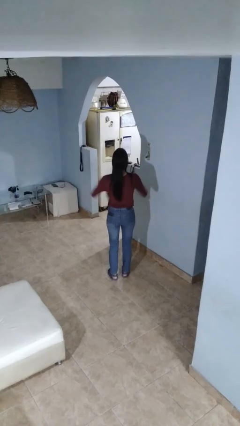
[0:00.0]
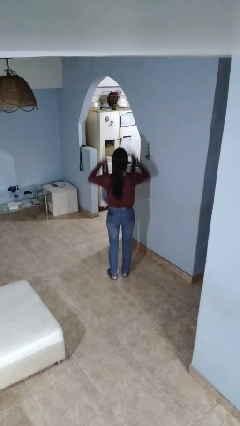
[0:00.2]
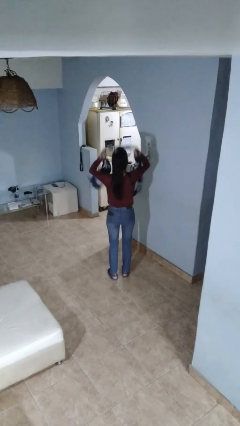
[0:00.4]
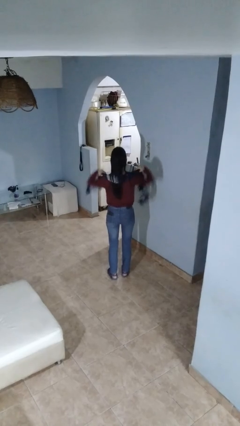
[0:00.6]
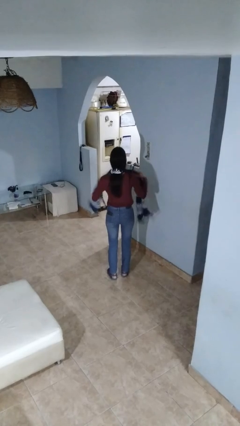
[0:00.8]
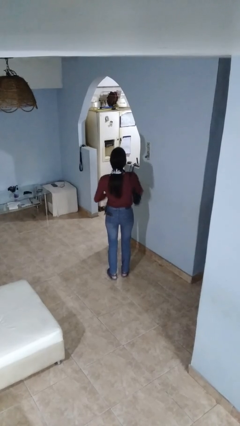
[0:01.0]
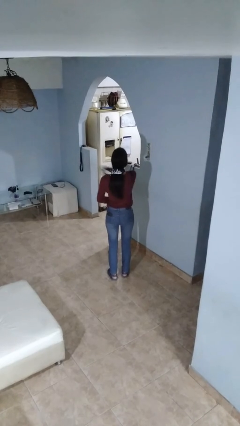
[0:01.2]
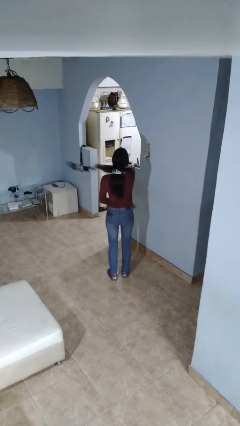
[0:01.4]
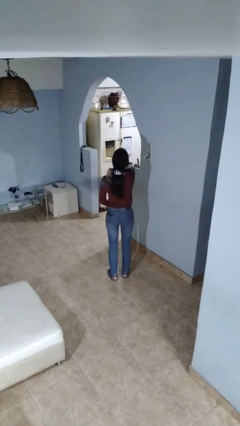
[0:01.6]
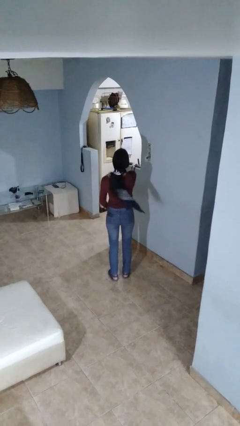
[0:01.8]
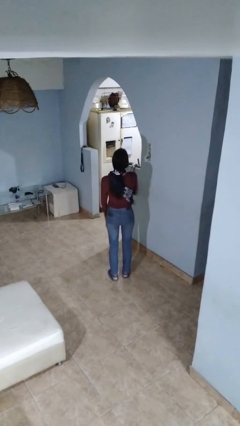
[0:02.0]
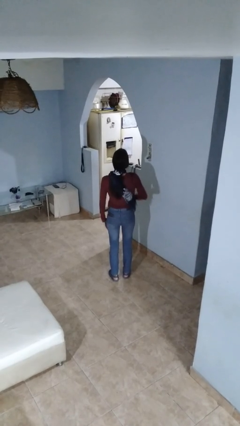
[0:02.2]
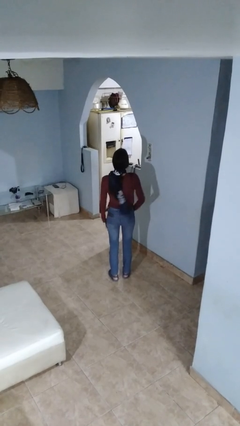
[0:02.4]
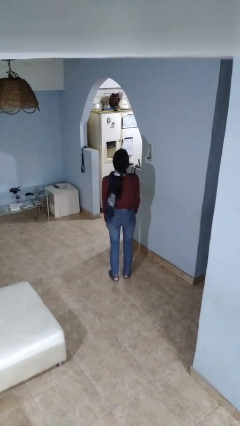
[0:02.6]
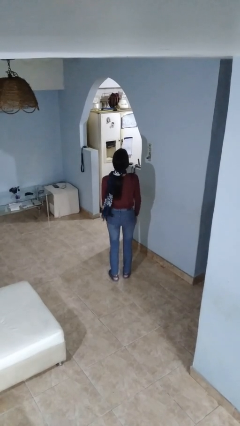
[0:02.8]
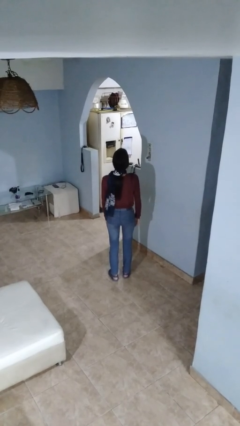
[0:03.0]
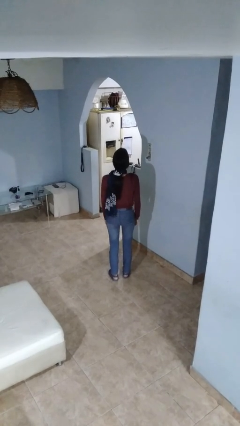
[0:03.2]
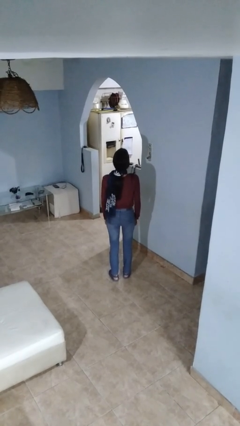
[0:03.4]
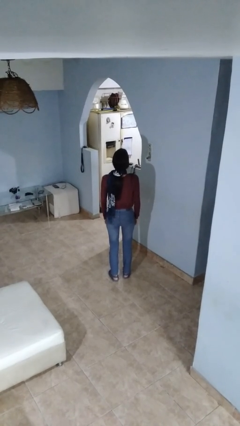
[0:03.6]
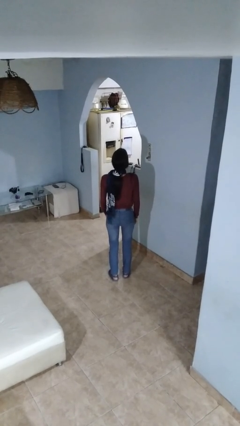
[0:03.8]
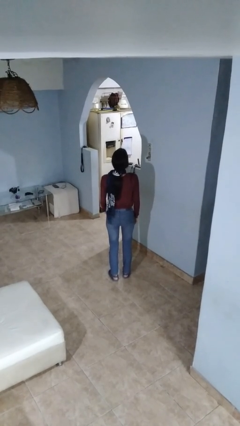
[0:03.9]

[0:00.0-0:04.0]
person puts on scarf

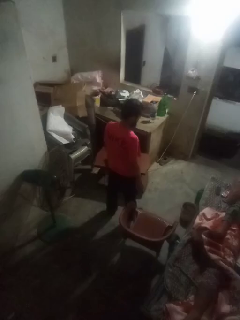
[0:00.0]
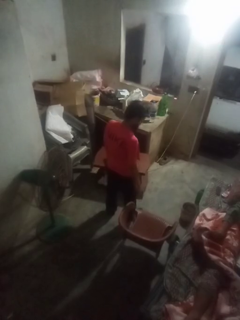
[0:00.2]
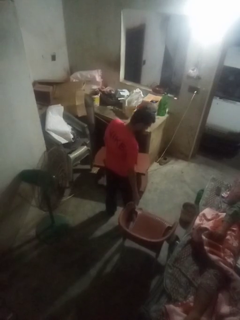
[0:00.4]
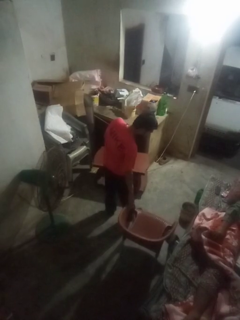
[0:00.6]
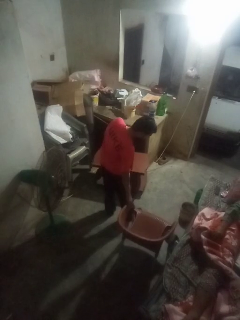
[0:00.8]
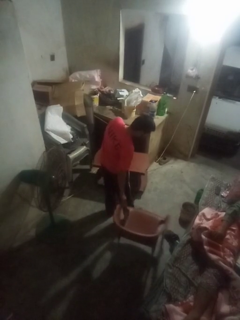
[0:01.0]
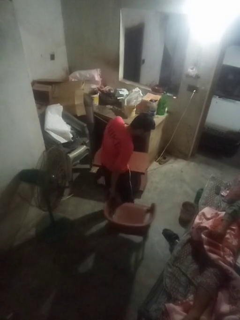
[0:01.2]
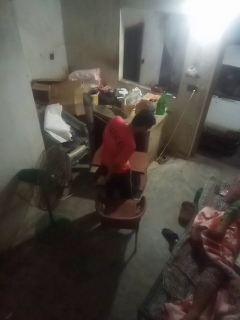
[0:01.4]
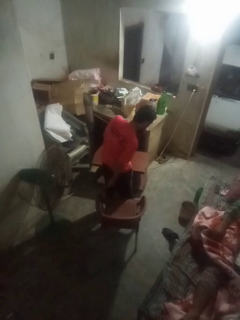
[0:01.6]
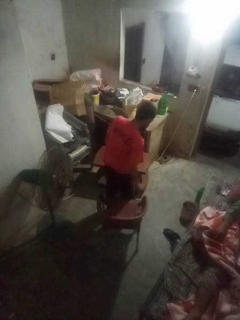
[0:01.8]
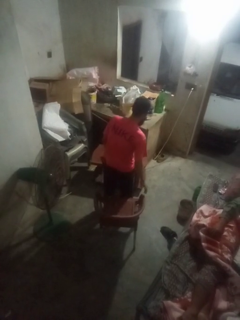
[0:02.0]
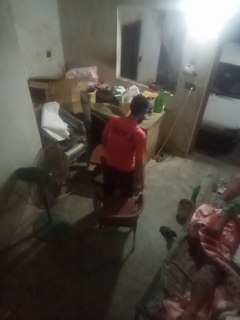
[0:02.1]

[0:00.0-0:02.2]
person pulls out chair

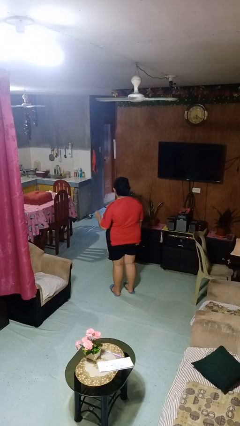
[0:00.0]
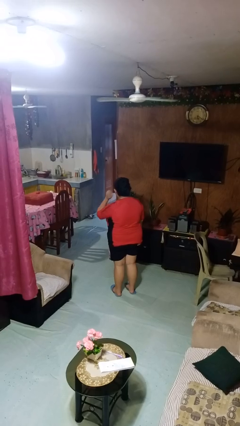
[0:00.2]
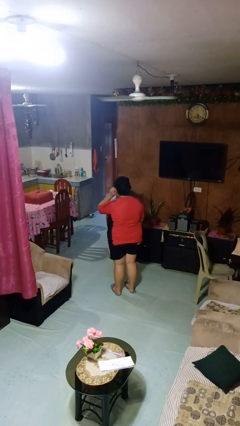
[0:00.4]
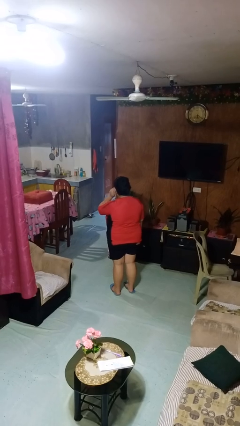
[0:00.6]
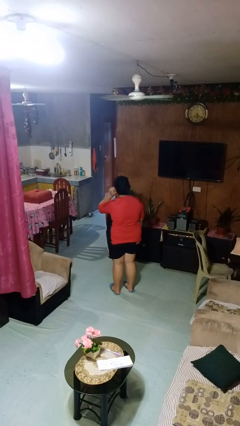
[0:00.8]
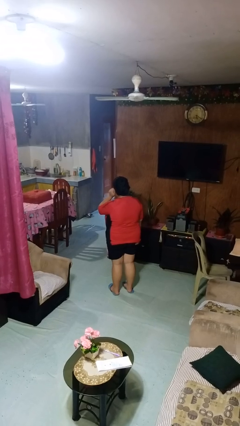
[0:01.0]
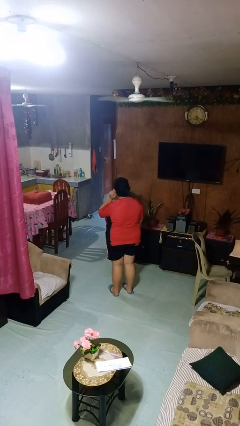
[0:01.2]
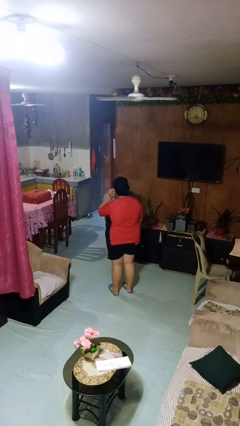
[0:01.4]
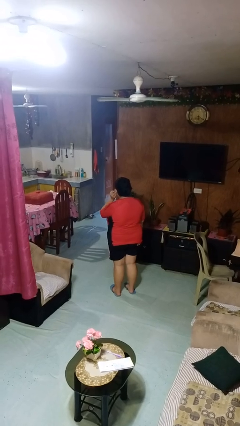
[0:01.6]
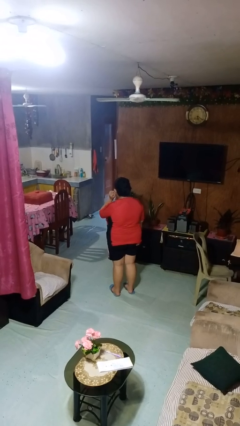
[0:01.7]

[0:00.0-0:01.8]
person touches earlobe

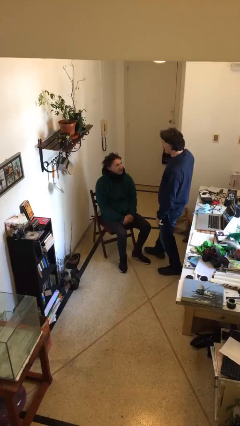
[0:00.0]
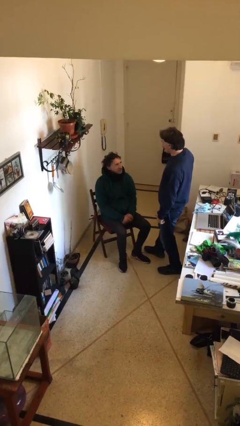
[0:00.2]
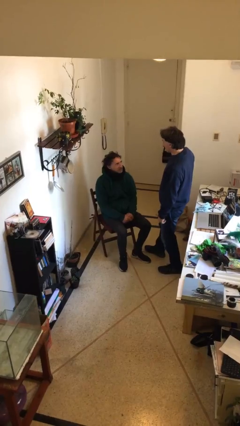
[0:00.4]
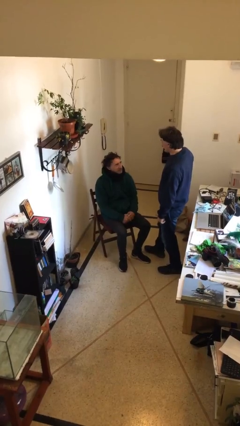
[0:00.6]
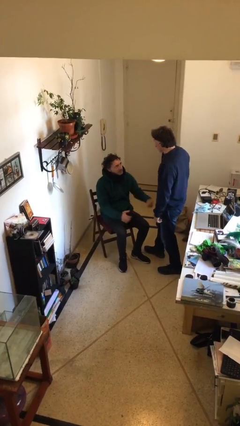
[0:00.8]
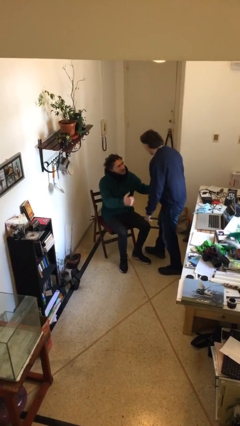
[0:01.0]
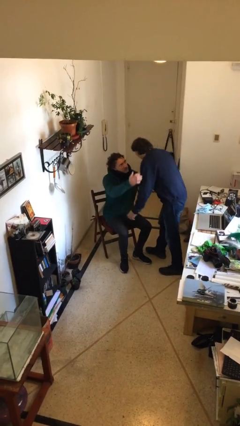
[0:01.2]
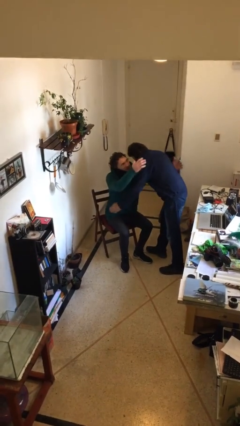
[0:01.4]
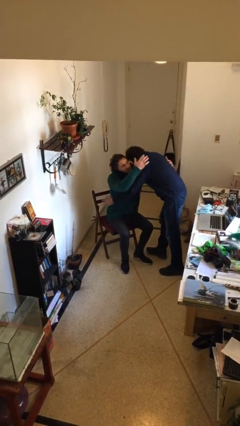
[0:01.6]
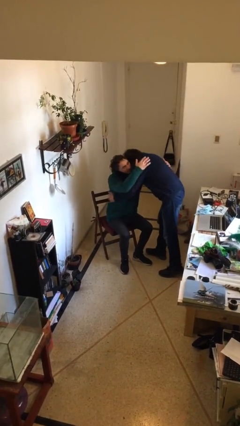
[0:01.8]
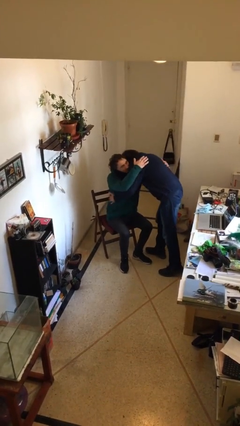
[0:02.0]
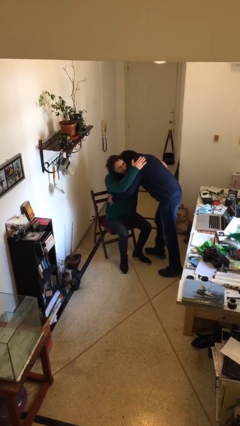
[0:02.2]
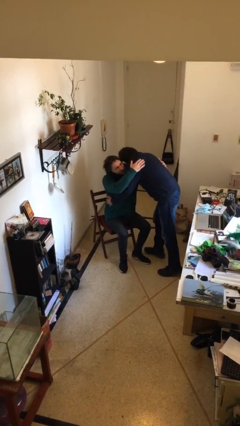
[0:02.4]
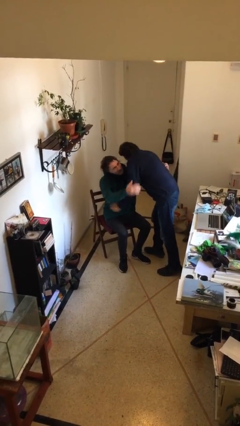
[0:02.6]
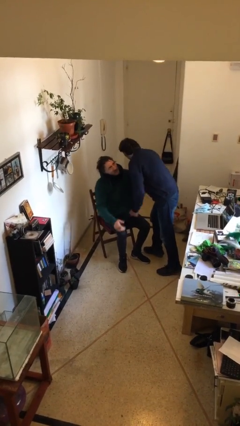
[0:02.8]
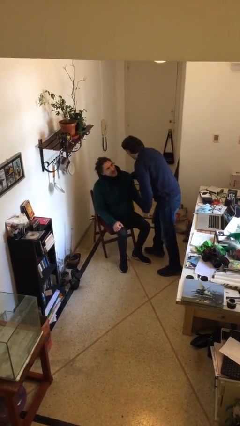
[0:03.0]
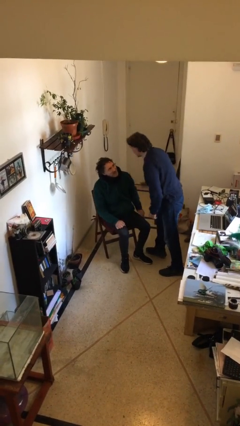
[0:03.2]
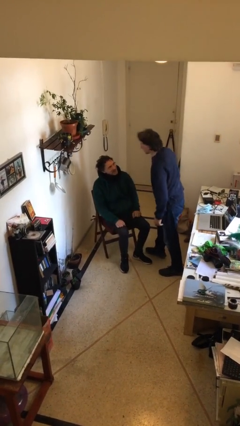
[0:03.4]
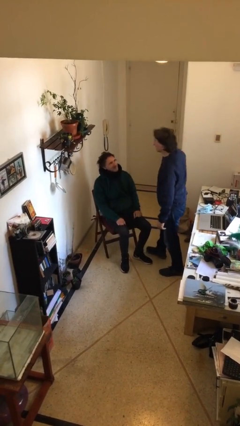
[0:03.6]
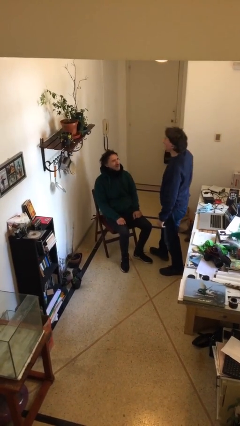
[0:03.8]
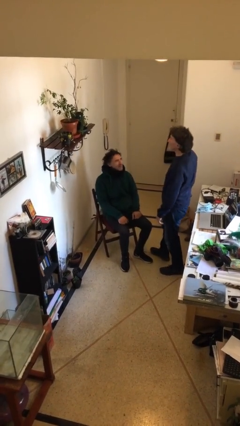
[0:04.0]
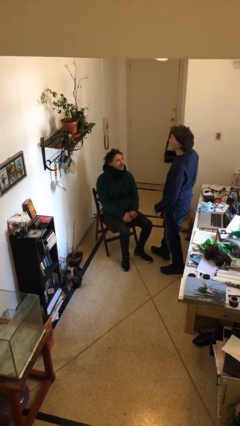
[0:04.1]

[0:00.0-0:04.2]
person embraces person

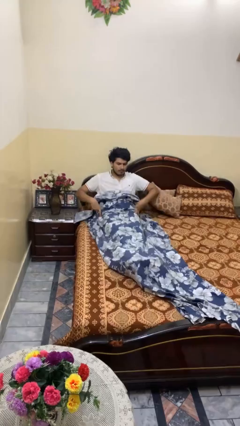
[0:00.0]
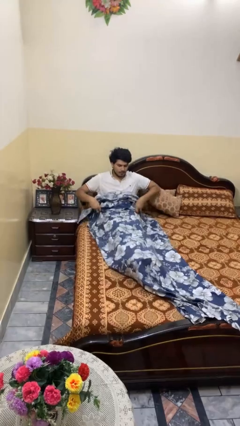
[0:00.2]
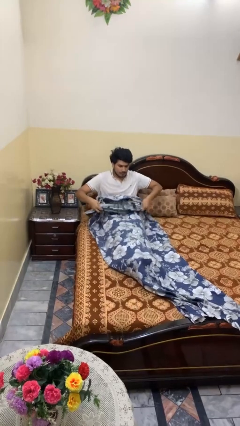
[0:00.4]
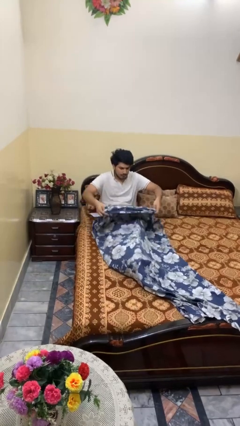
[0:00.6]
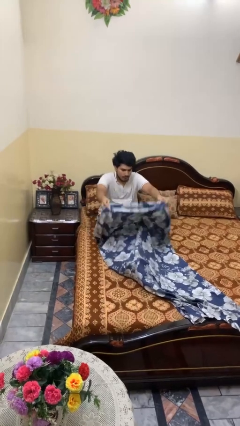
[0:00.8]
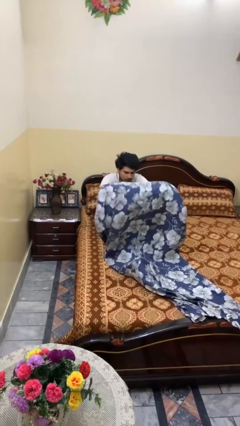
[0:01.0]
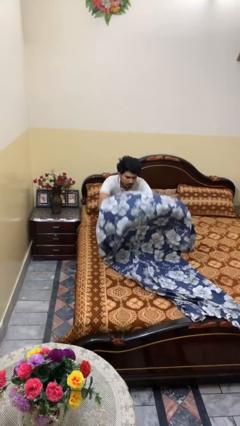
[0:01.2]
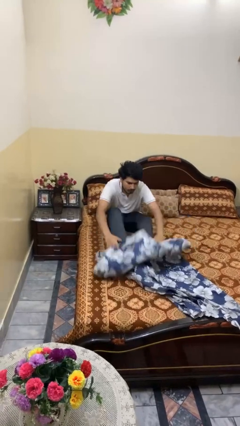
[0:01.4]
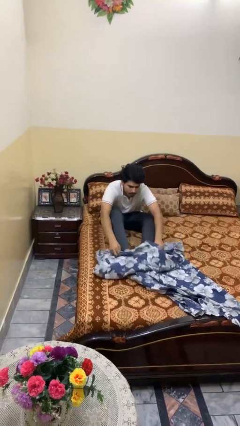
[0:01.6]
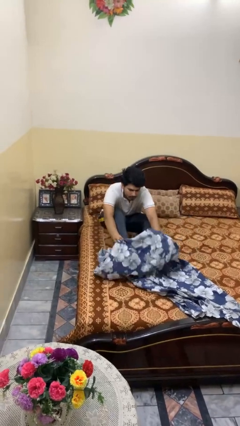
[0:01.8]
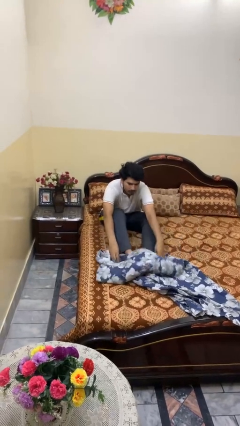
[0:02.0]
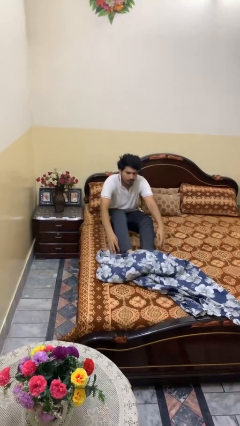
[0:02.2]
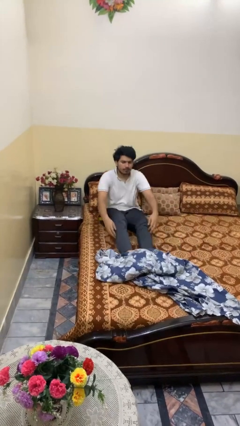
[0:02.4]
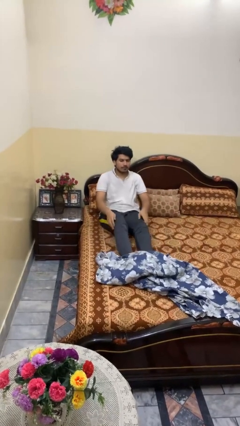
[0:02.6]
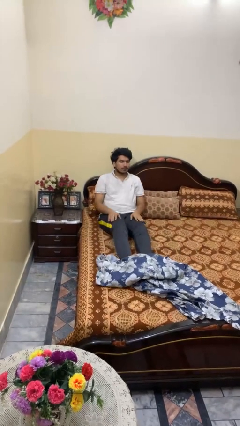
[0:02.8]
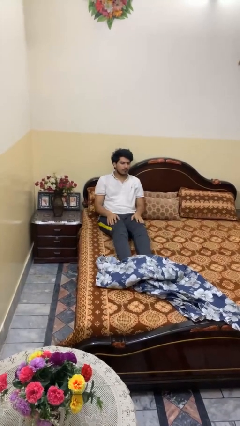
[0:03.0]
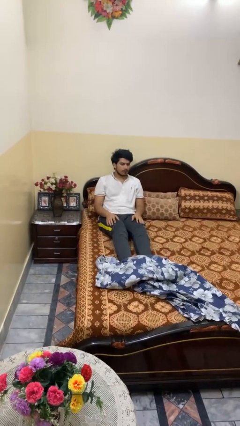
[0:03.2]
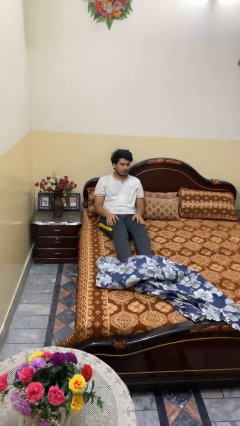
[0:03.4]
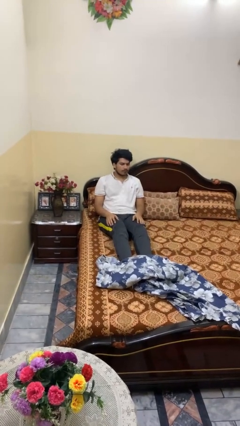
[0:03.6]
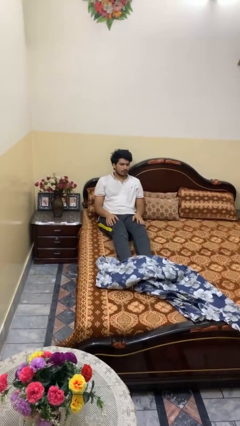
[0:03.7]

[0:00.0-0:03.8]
person uncovers with bedsheets

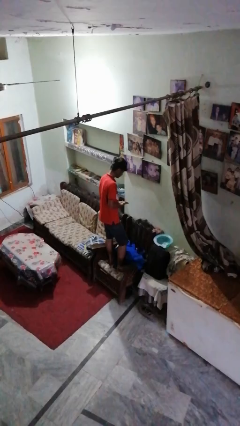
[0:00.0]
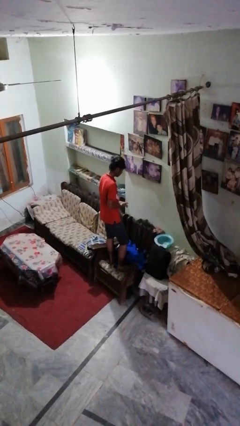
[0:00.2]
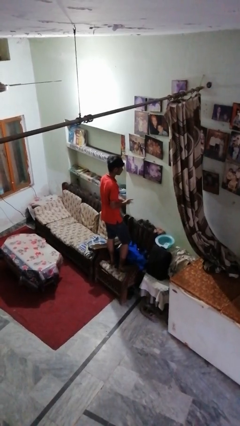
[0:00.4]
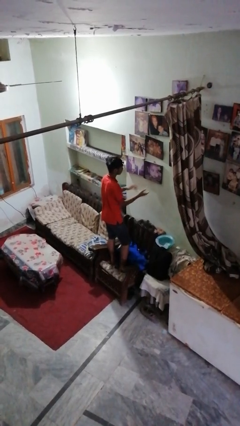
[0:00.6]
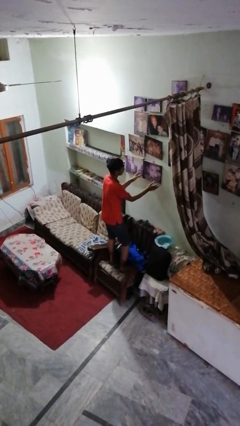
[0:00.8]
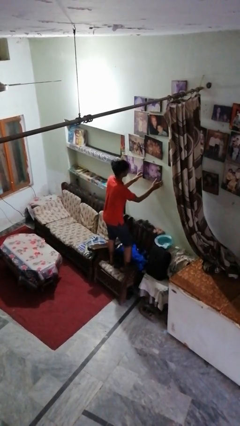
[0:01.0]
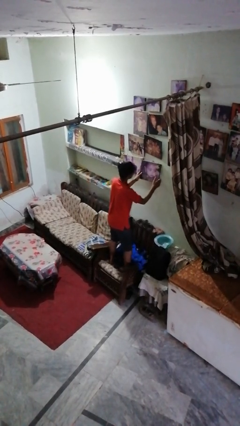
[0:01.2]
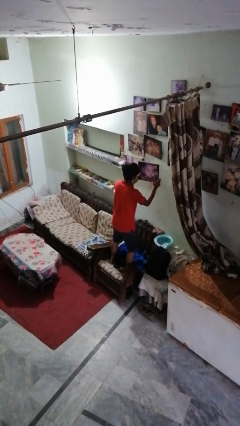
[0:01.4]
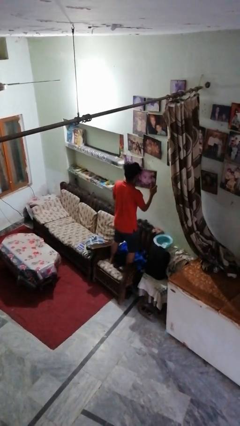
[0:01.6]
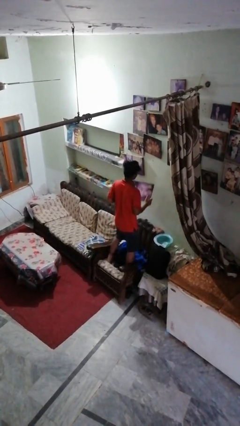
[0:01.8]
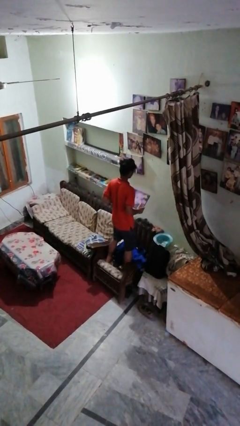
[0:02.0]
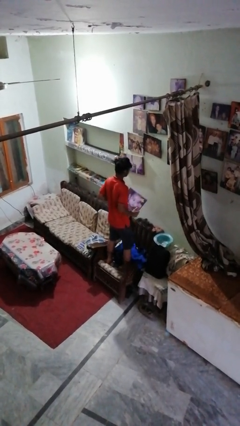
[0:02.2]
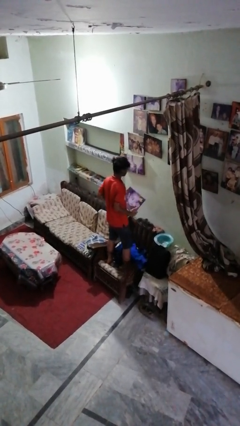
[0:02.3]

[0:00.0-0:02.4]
person takes down picture frame
